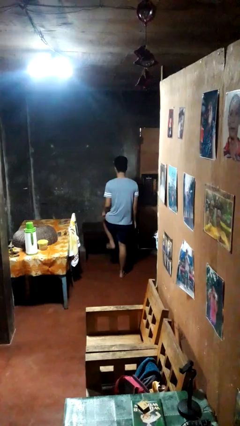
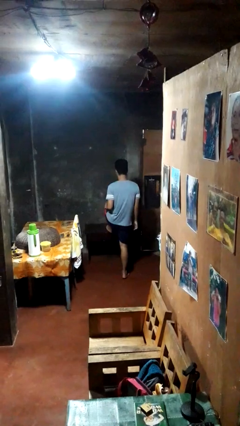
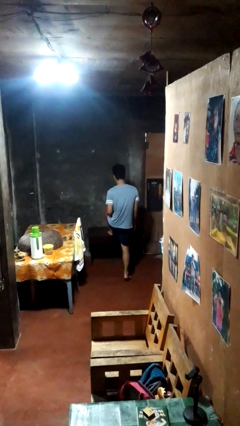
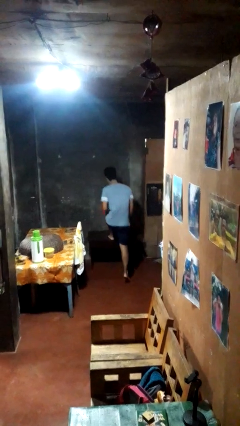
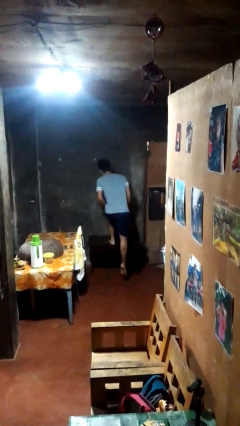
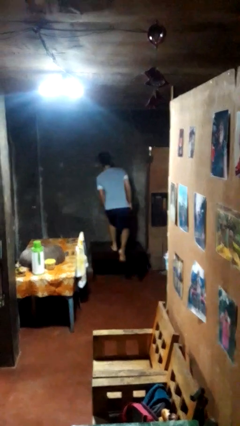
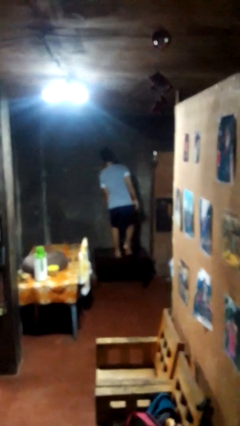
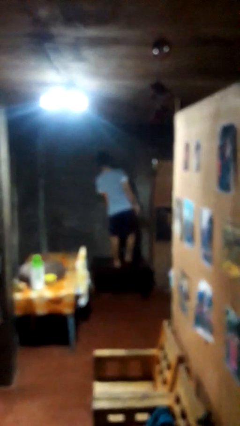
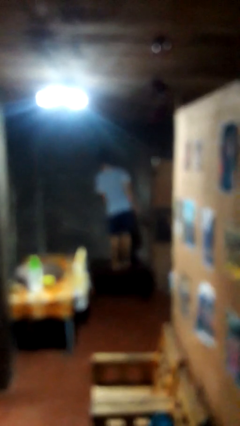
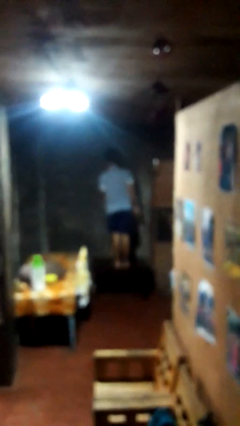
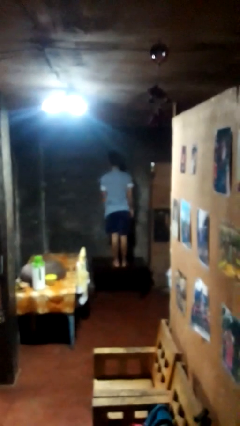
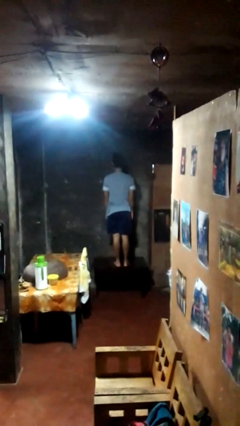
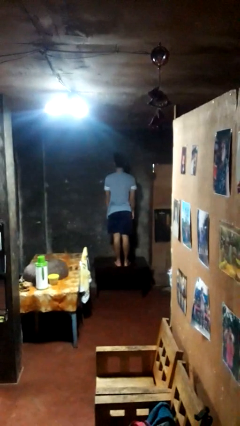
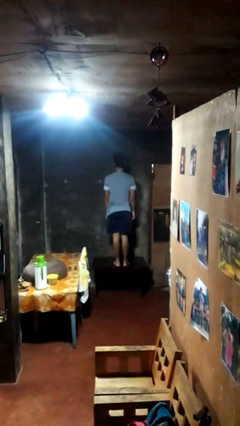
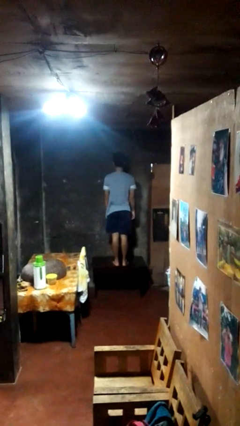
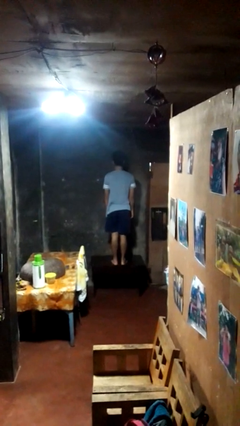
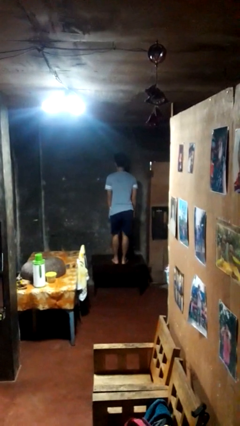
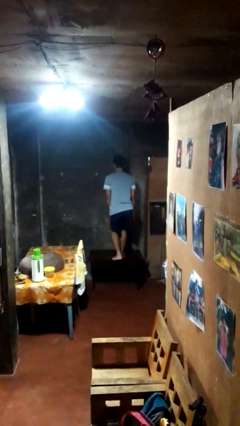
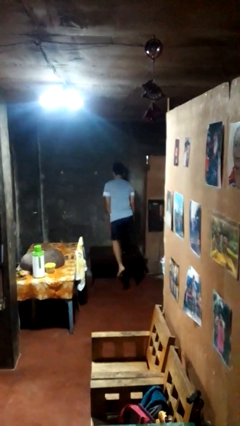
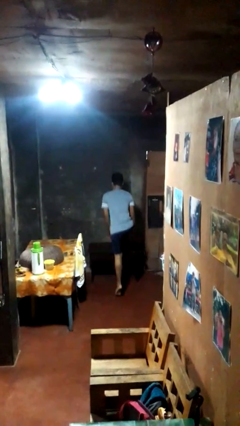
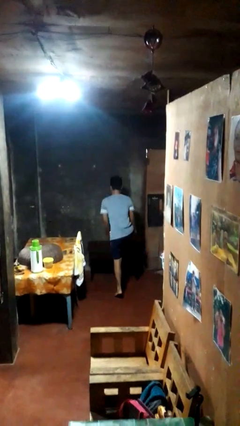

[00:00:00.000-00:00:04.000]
person climbs on table

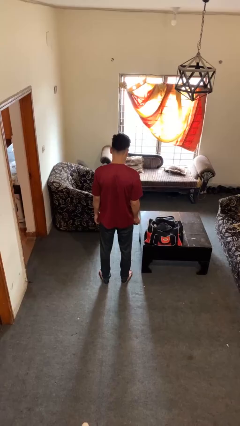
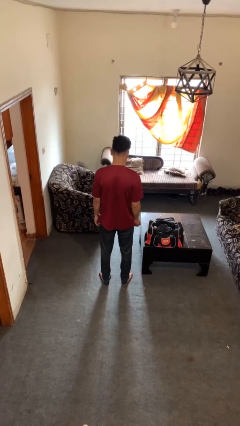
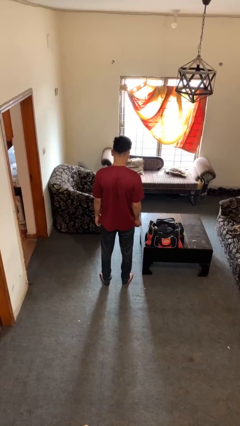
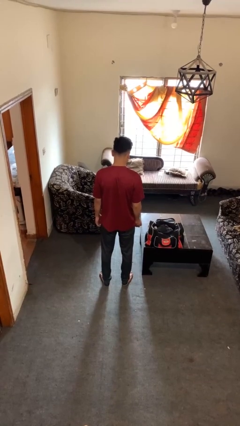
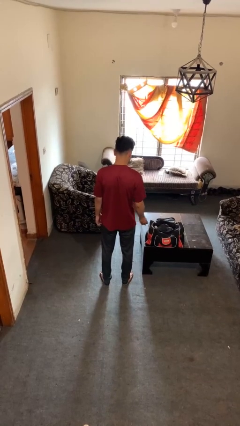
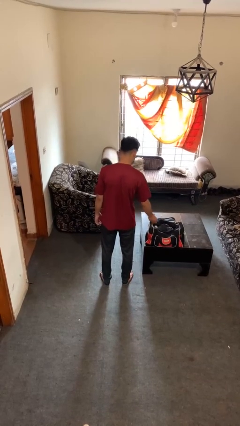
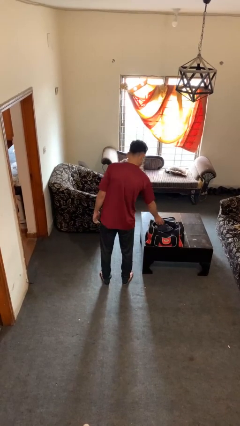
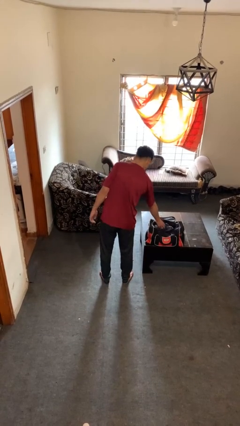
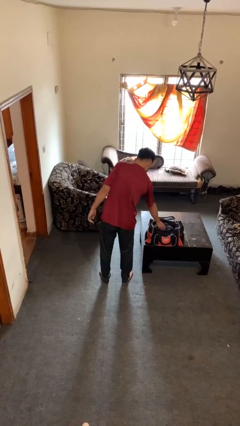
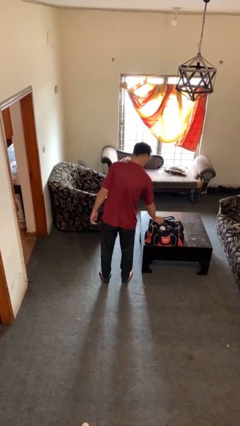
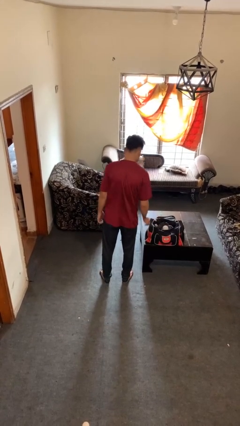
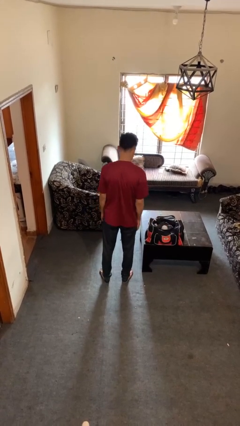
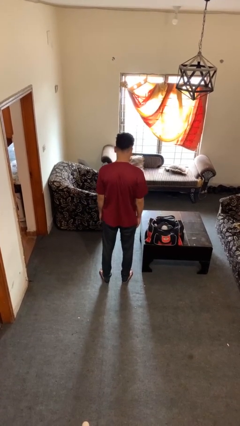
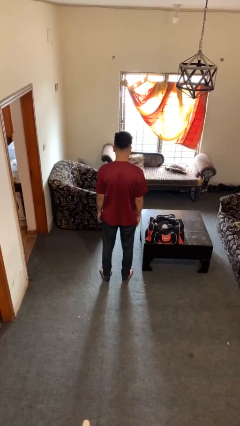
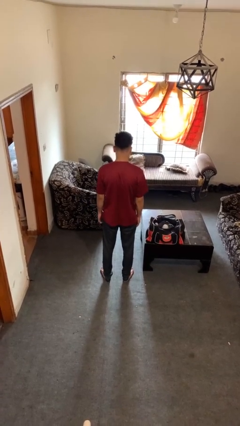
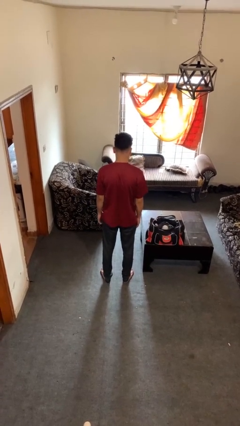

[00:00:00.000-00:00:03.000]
person puts object into bag

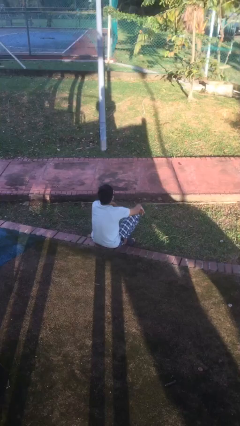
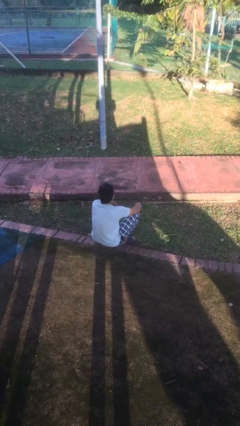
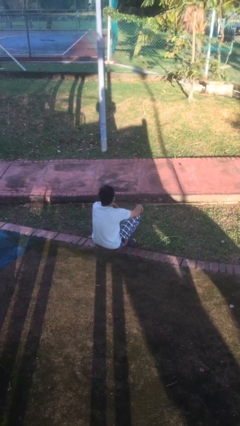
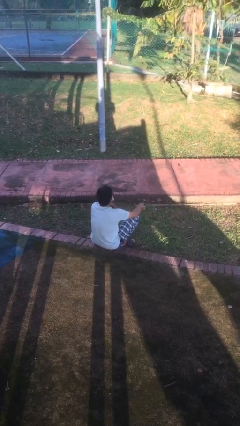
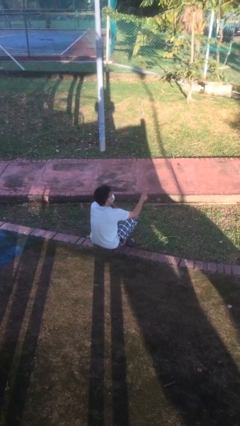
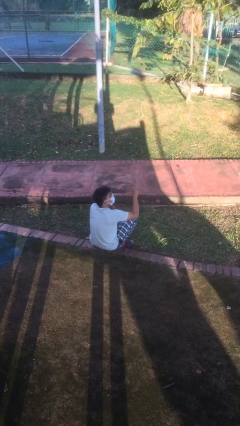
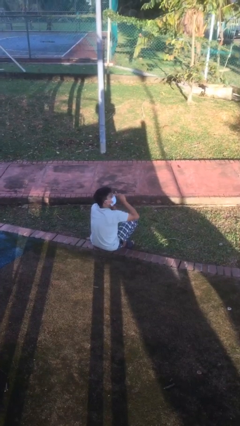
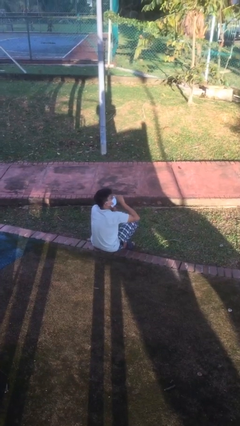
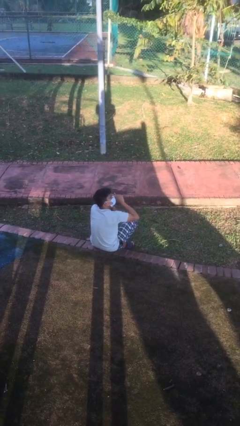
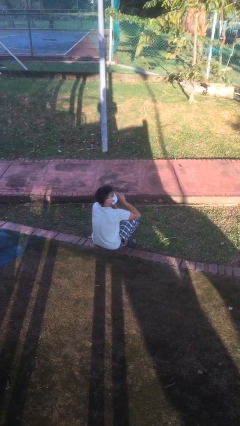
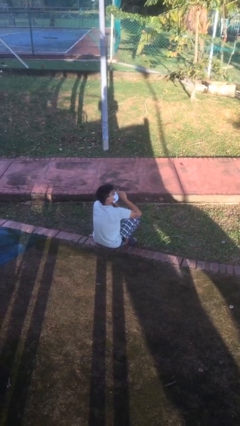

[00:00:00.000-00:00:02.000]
person gestures be quiet

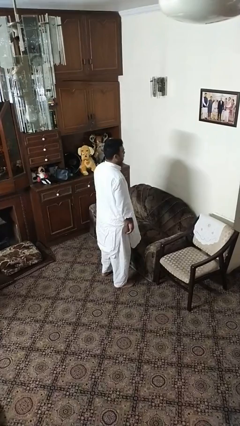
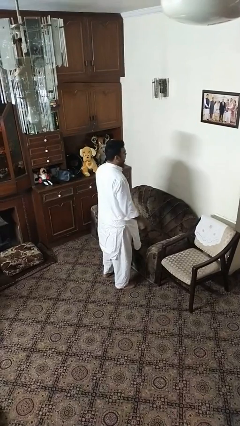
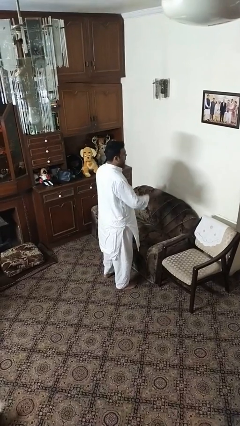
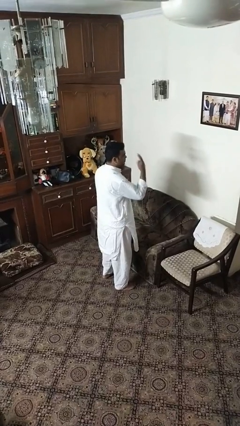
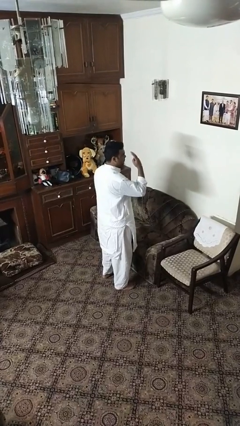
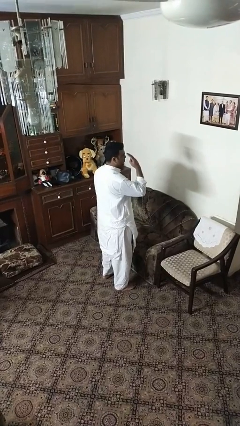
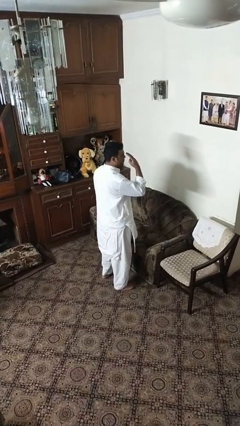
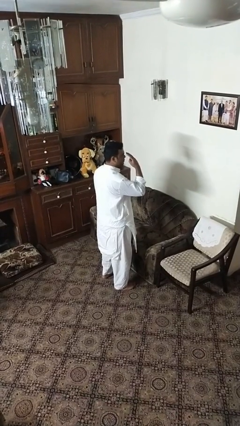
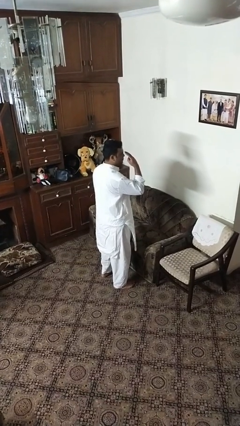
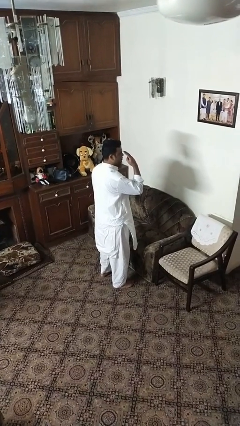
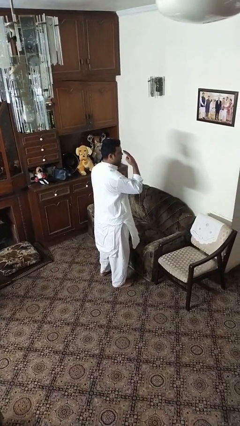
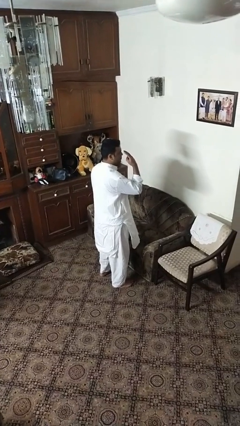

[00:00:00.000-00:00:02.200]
person gestures watch closely

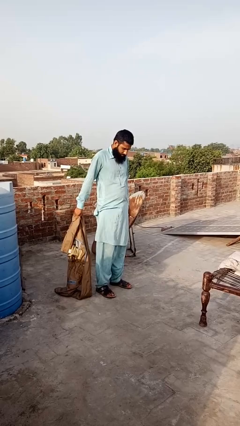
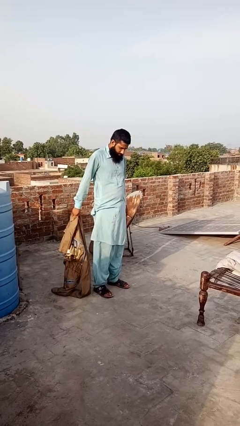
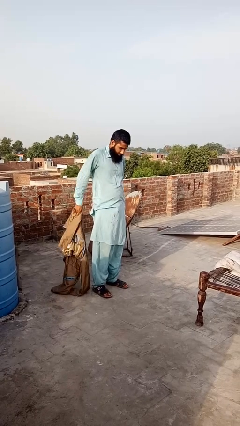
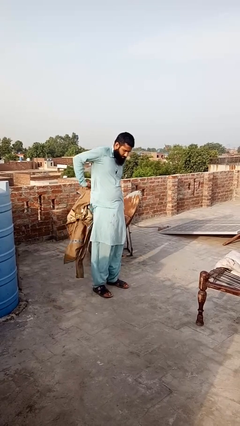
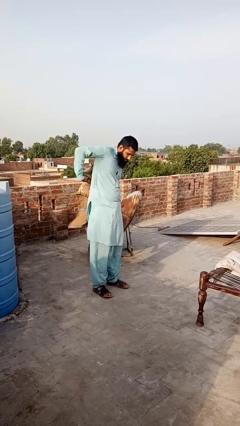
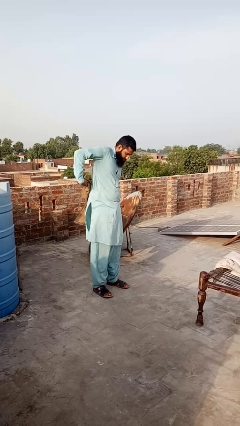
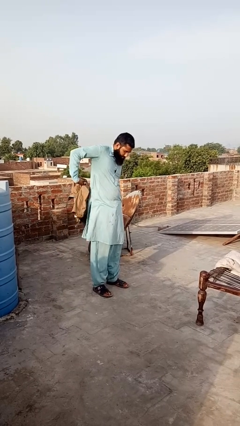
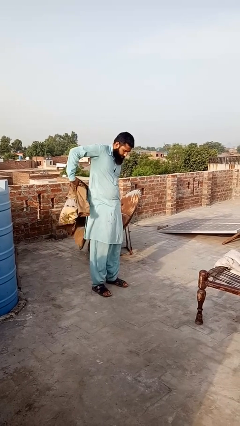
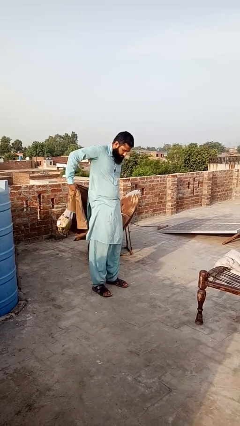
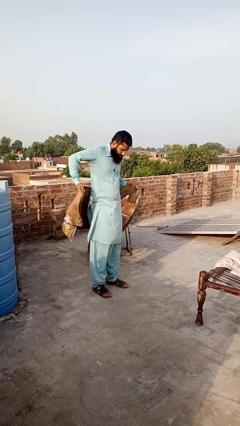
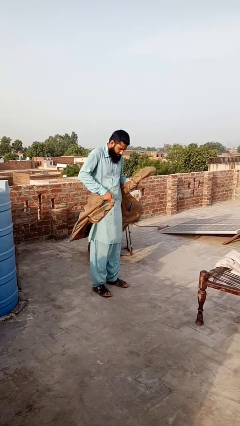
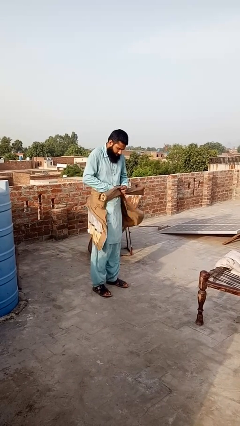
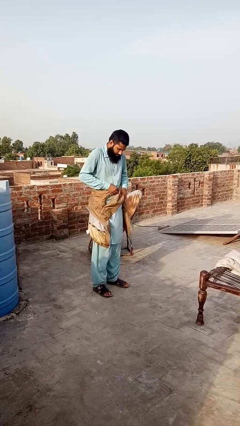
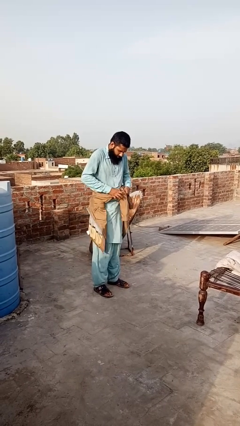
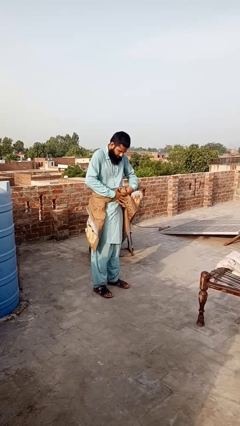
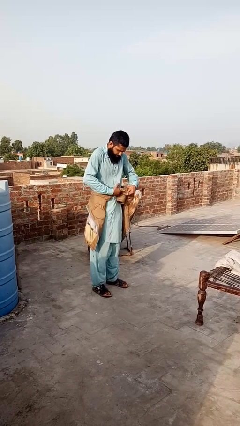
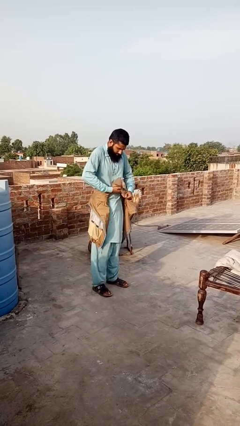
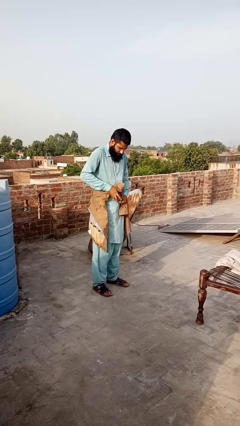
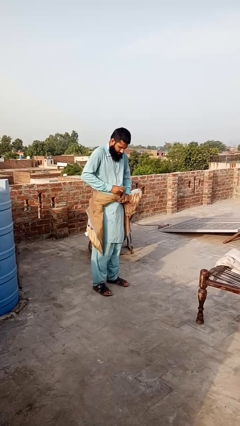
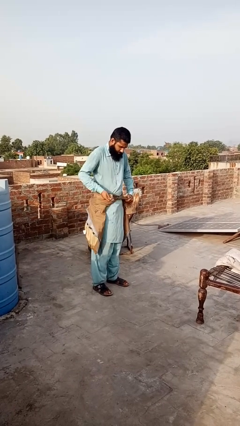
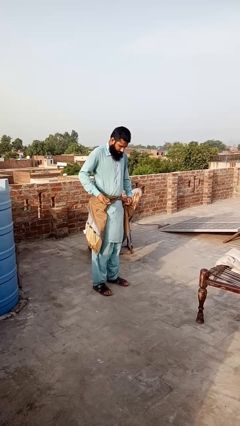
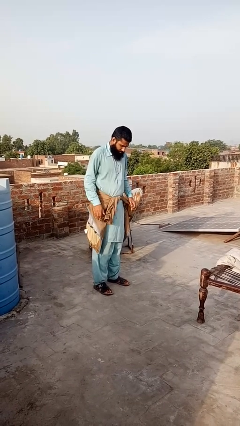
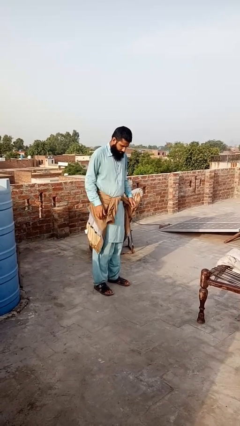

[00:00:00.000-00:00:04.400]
person ties jacket around waist

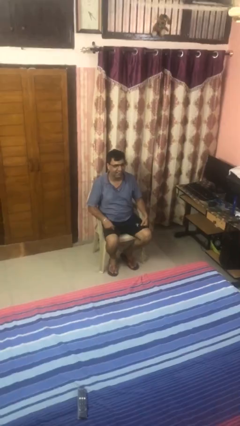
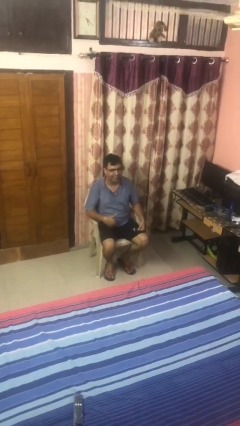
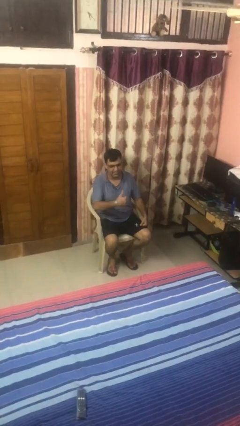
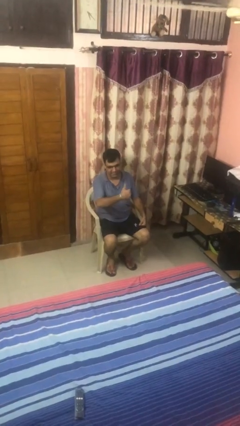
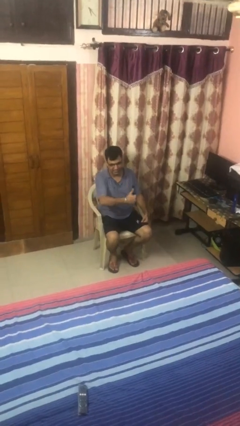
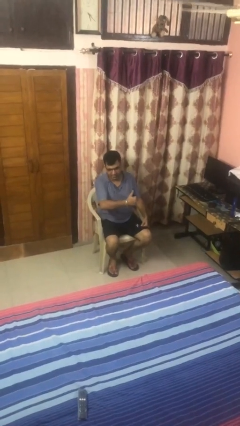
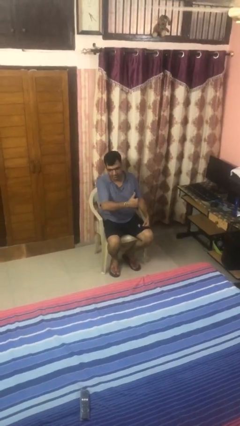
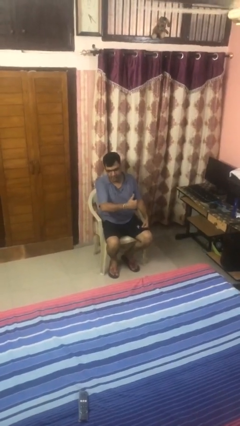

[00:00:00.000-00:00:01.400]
person gestures thumbs up

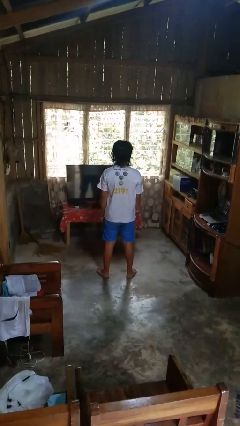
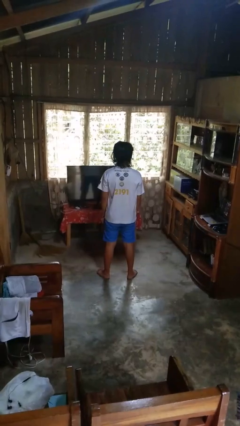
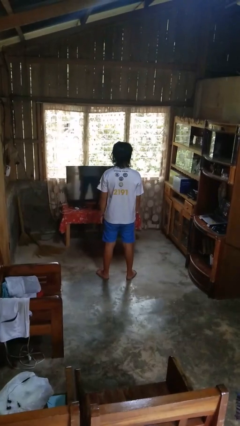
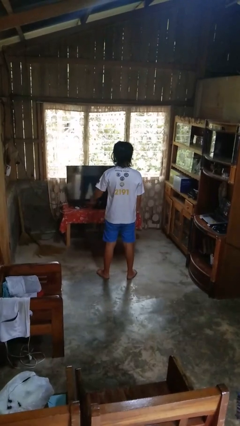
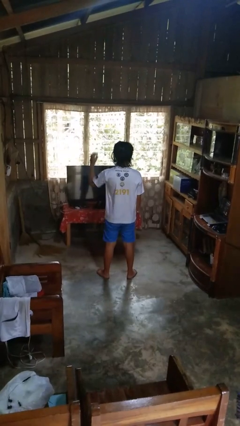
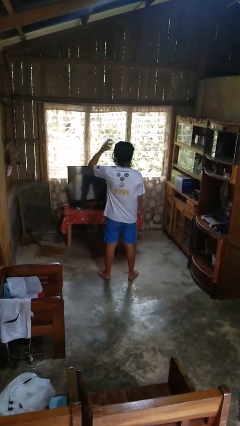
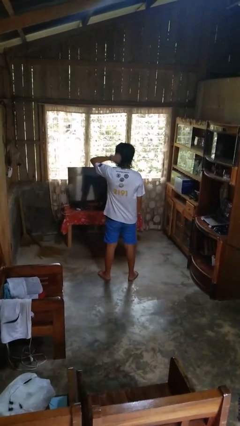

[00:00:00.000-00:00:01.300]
person scratches face
